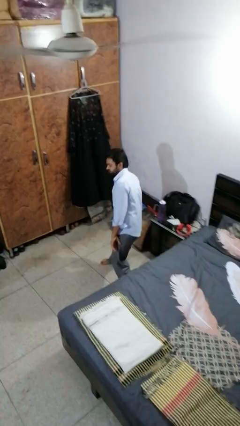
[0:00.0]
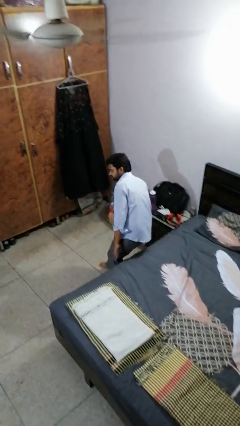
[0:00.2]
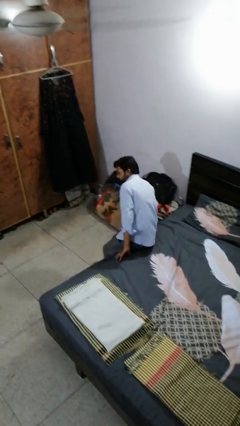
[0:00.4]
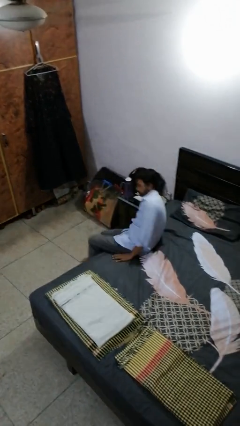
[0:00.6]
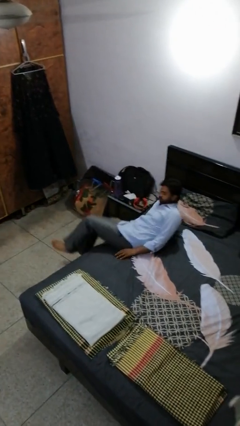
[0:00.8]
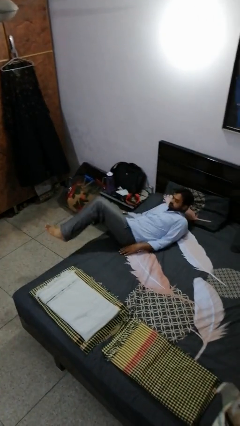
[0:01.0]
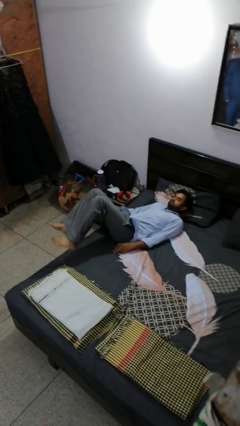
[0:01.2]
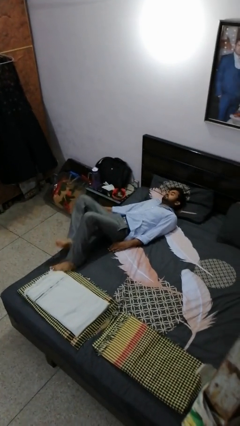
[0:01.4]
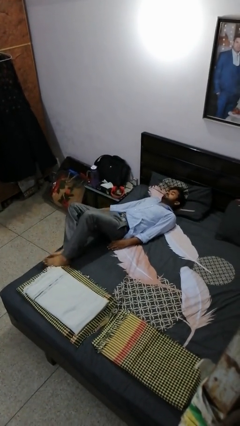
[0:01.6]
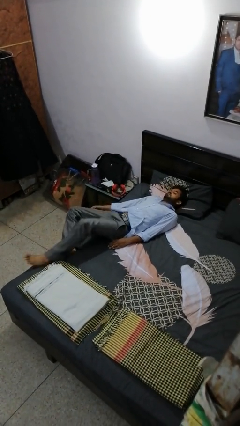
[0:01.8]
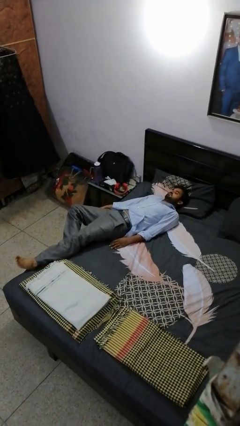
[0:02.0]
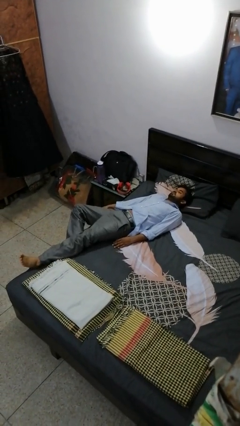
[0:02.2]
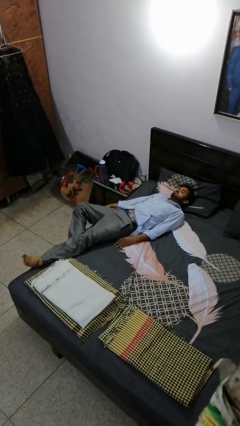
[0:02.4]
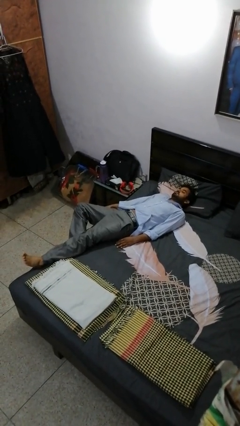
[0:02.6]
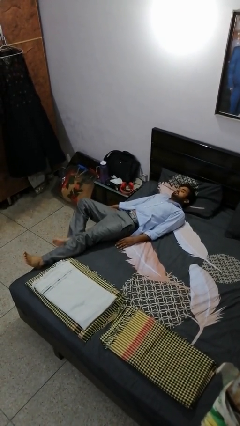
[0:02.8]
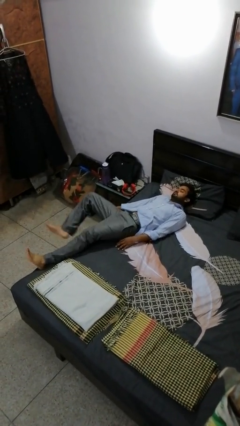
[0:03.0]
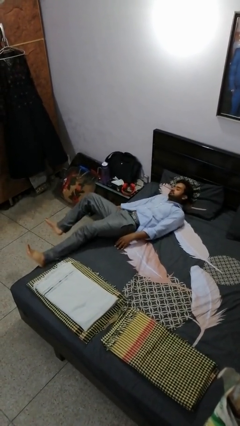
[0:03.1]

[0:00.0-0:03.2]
person lies down on bed

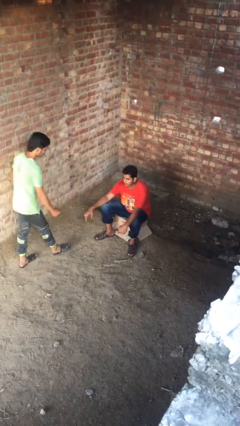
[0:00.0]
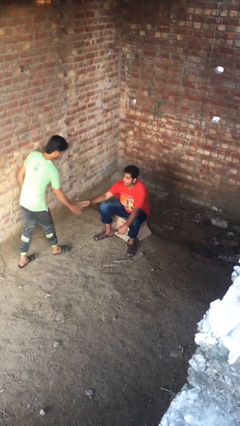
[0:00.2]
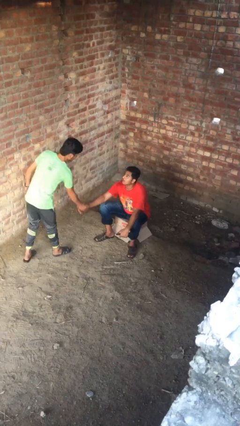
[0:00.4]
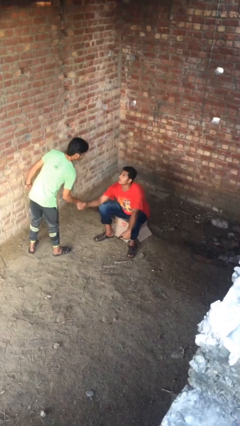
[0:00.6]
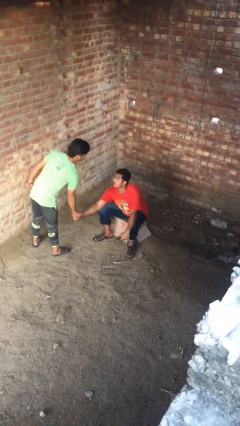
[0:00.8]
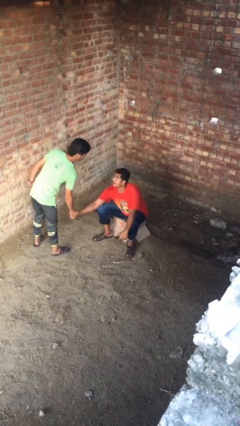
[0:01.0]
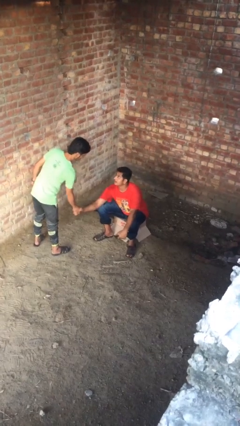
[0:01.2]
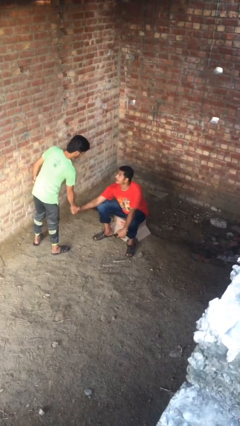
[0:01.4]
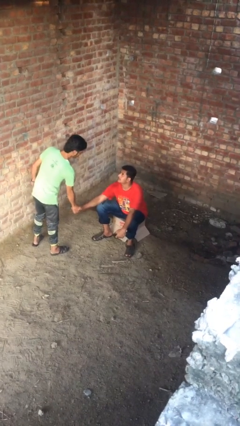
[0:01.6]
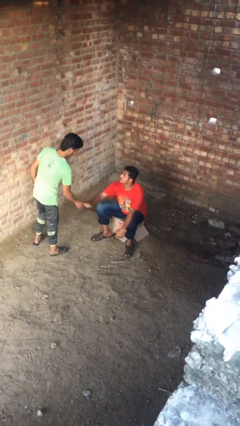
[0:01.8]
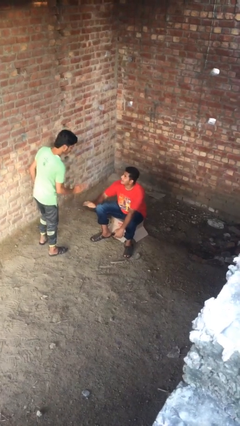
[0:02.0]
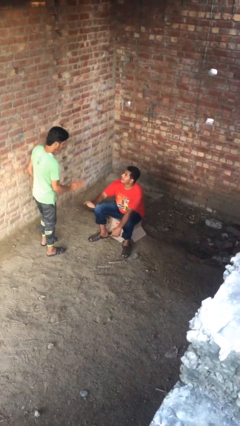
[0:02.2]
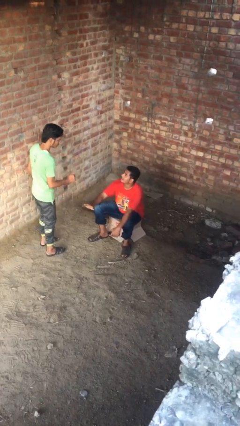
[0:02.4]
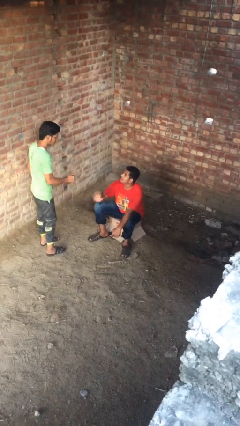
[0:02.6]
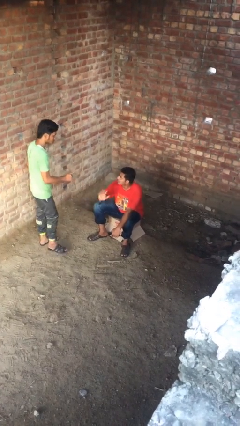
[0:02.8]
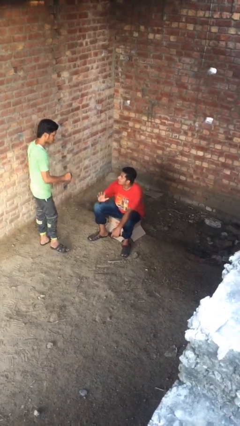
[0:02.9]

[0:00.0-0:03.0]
person shakes hand

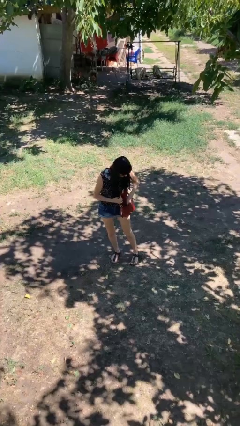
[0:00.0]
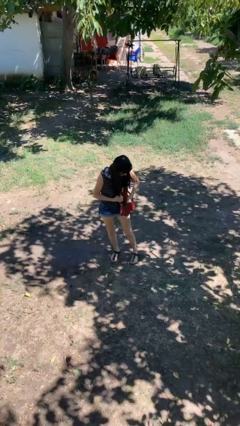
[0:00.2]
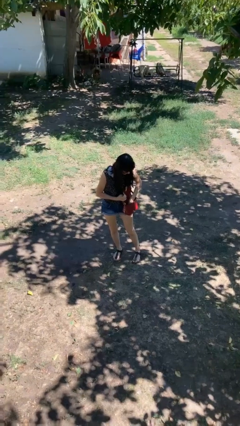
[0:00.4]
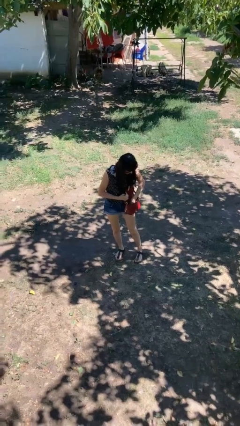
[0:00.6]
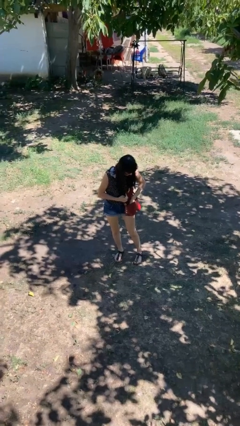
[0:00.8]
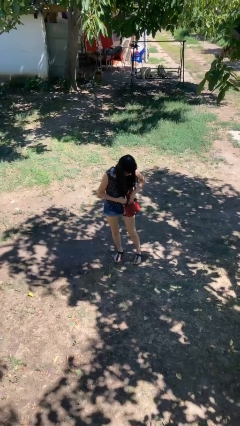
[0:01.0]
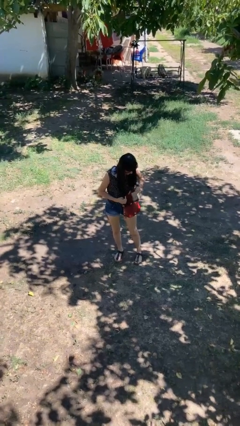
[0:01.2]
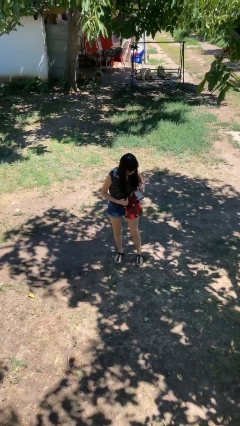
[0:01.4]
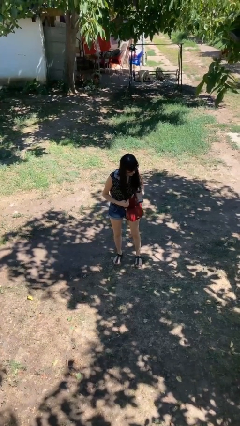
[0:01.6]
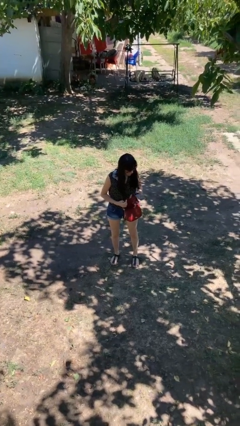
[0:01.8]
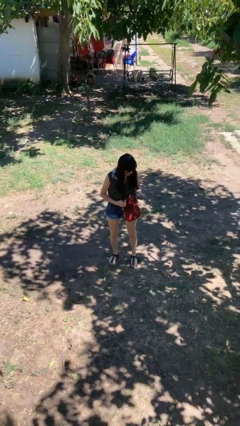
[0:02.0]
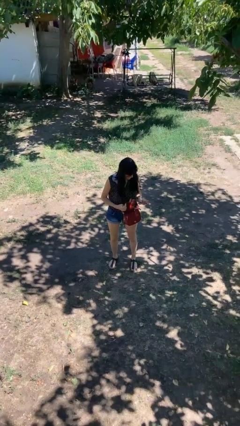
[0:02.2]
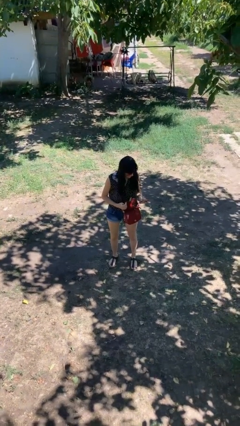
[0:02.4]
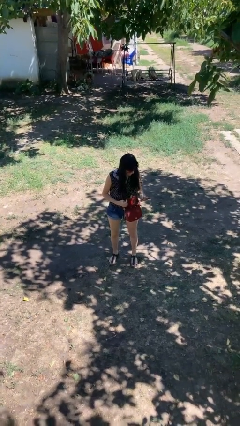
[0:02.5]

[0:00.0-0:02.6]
person takes object from purse

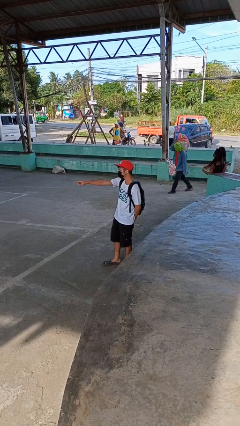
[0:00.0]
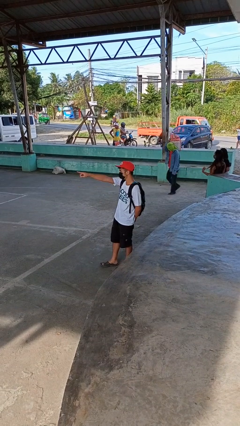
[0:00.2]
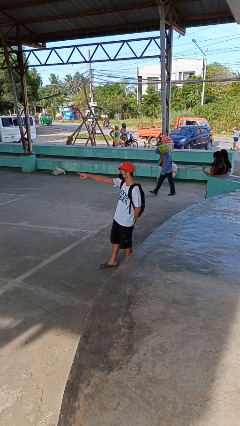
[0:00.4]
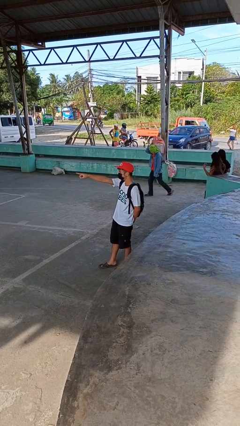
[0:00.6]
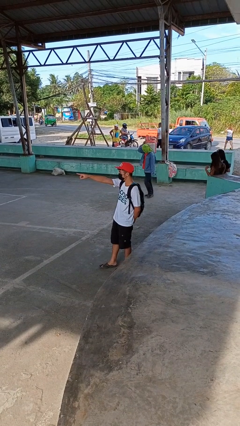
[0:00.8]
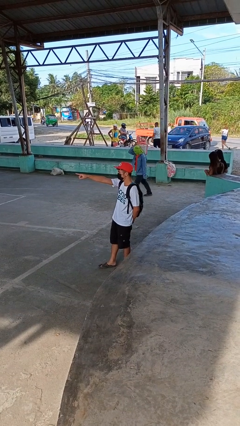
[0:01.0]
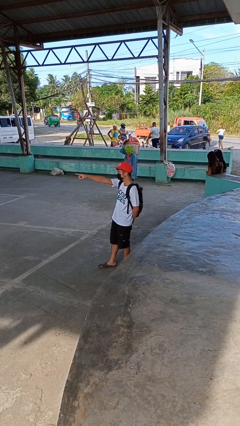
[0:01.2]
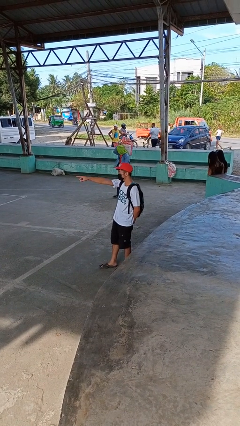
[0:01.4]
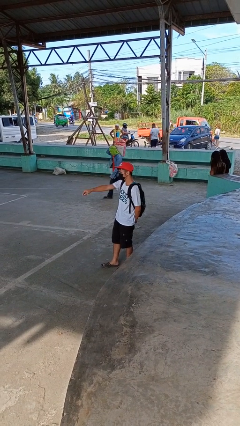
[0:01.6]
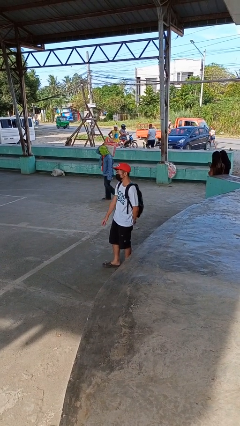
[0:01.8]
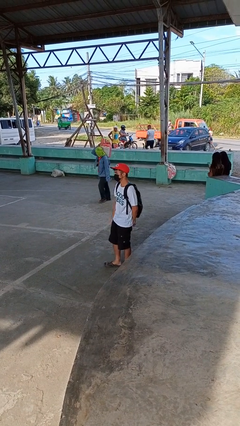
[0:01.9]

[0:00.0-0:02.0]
person points at person

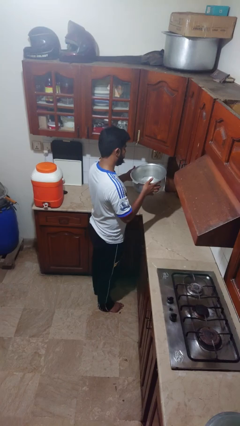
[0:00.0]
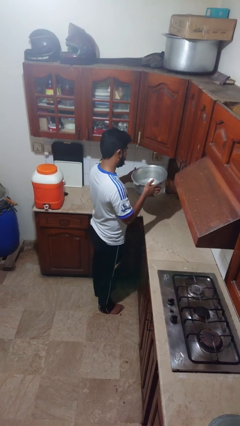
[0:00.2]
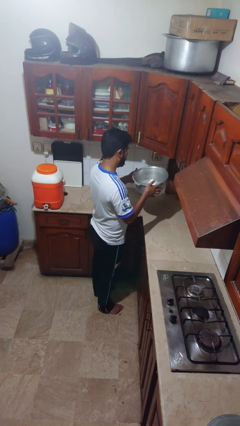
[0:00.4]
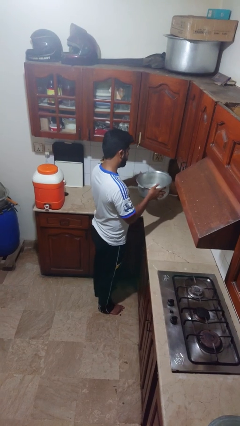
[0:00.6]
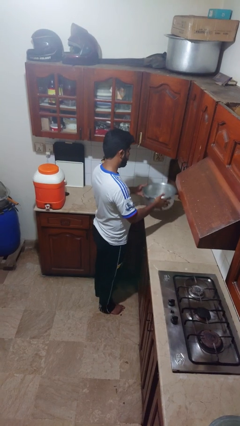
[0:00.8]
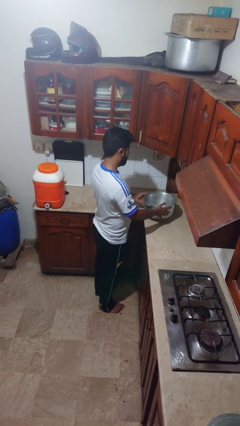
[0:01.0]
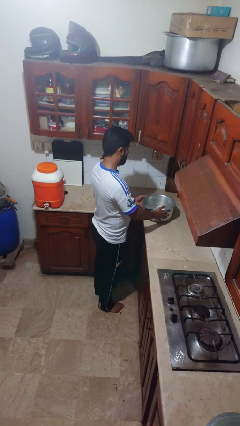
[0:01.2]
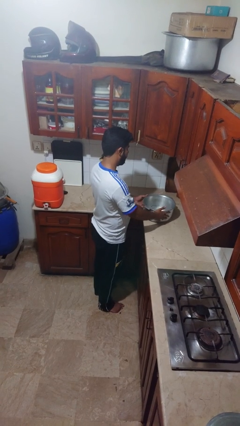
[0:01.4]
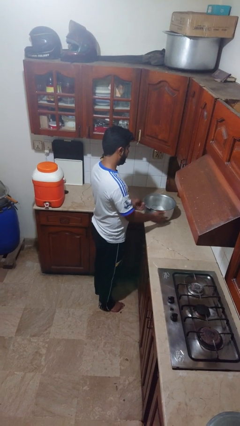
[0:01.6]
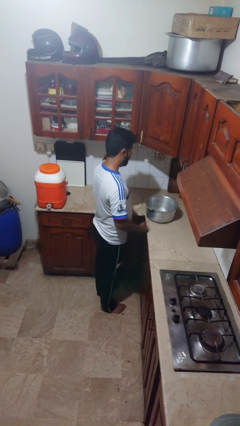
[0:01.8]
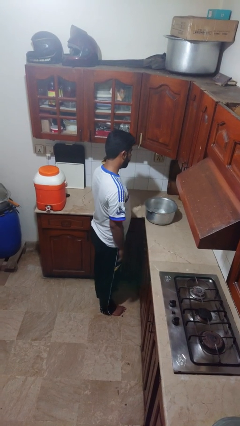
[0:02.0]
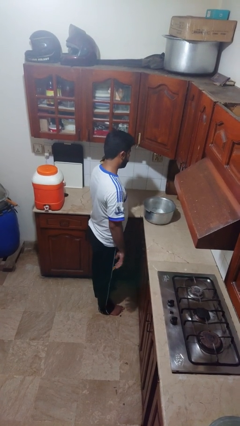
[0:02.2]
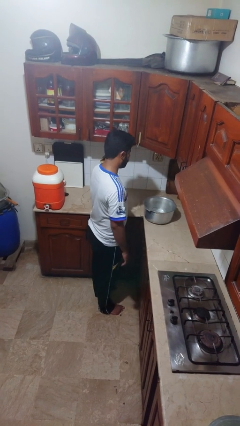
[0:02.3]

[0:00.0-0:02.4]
person puts down object on countertop

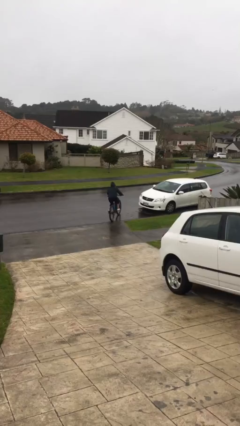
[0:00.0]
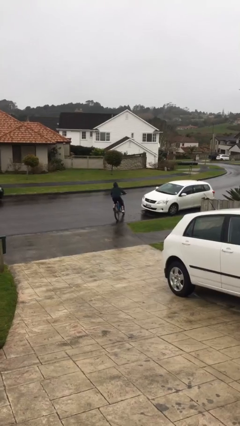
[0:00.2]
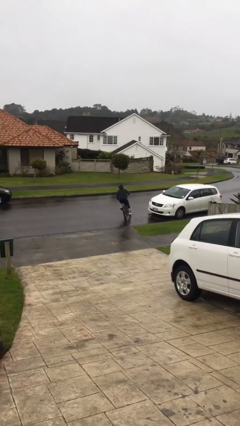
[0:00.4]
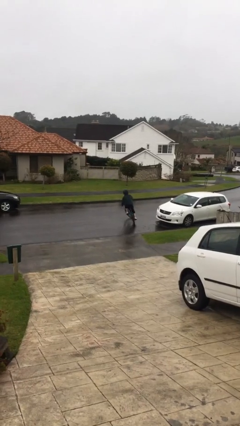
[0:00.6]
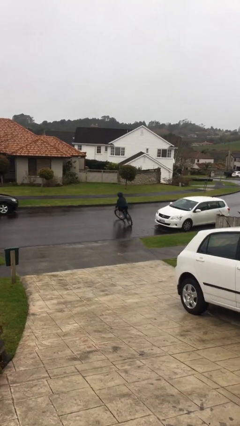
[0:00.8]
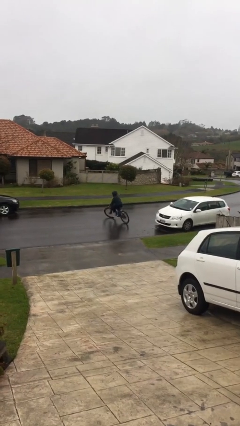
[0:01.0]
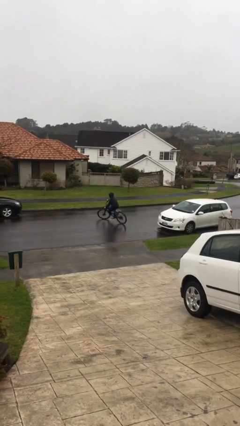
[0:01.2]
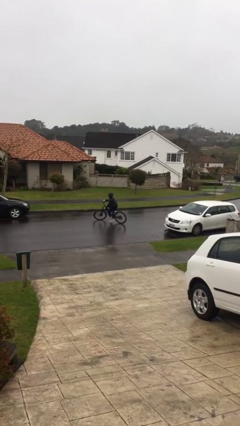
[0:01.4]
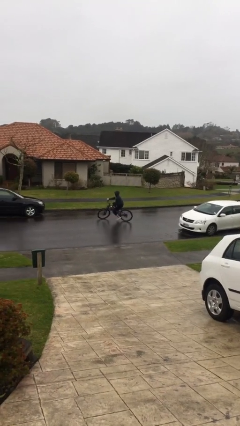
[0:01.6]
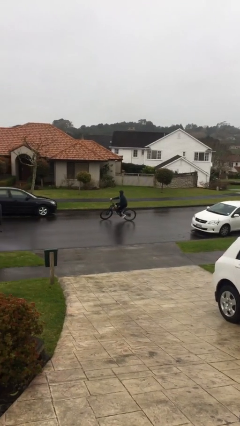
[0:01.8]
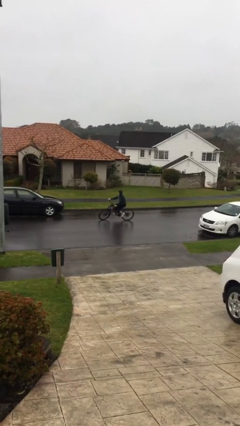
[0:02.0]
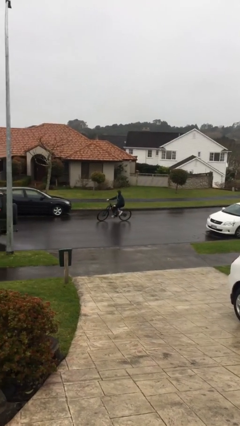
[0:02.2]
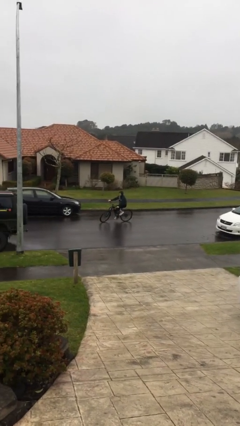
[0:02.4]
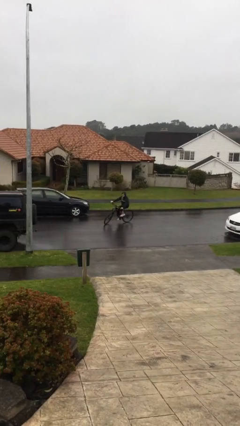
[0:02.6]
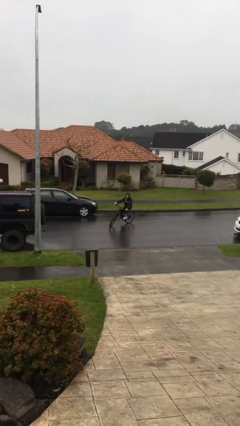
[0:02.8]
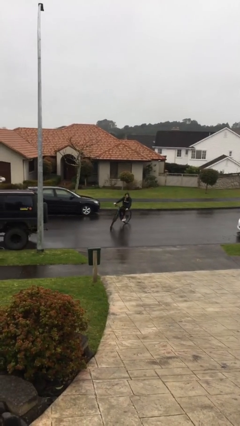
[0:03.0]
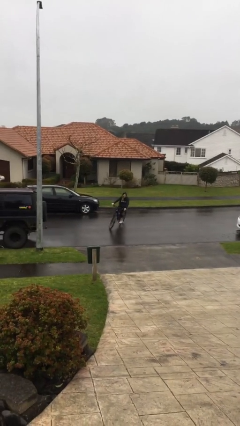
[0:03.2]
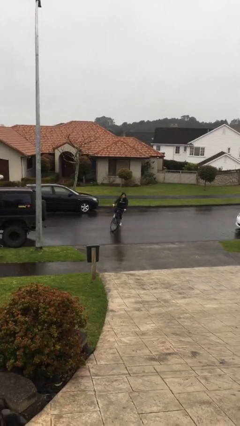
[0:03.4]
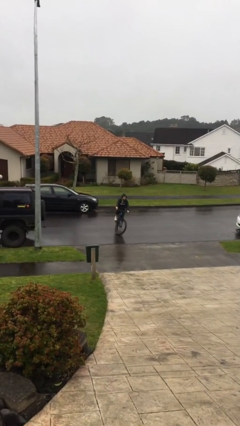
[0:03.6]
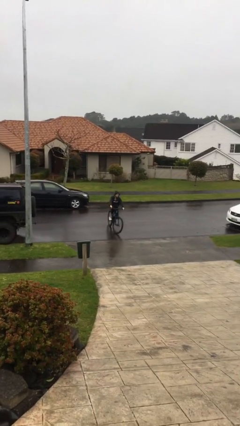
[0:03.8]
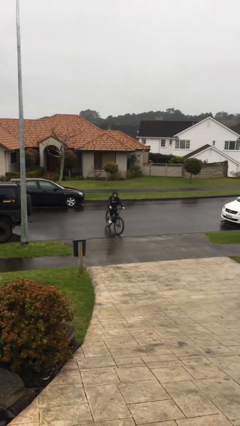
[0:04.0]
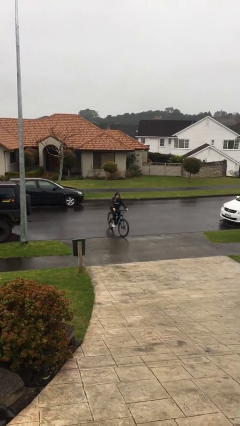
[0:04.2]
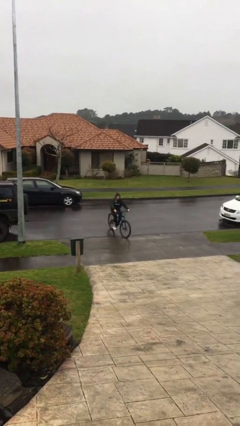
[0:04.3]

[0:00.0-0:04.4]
person rides bicycle
